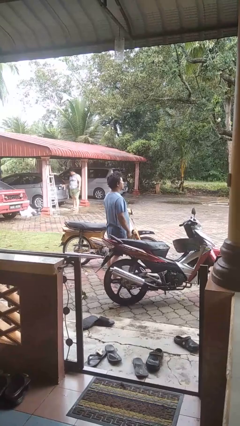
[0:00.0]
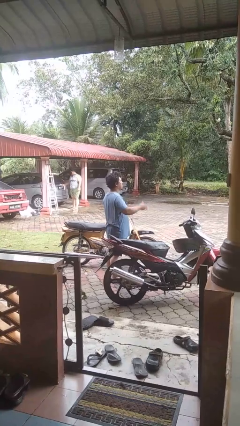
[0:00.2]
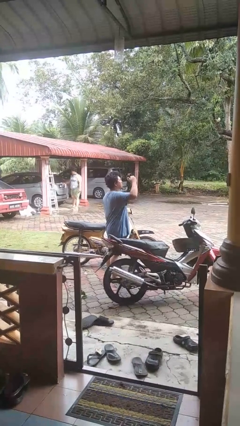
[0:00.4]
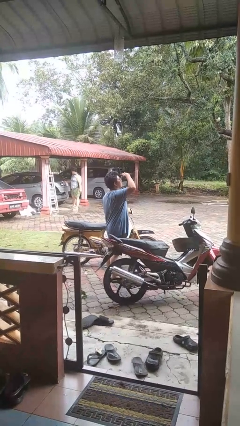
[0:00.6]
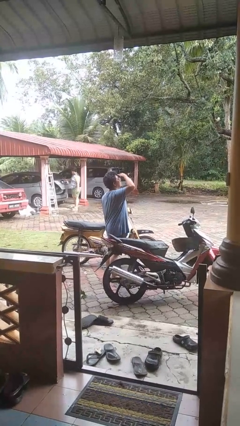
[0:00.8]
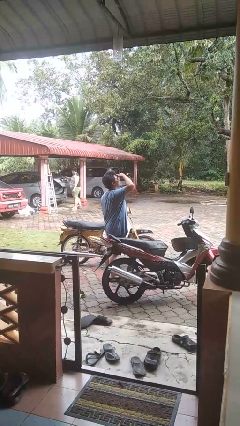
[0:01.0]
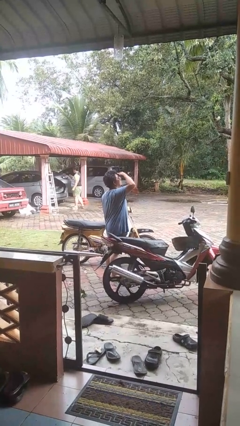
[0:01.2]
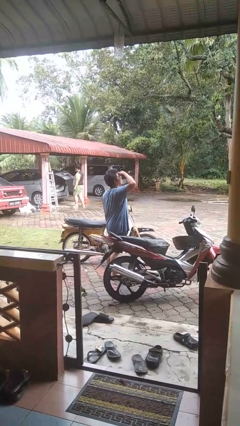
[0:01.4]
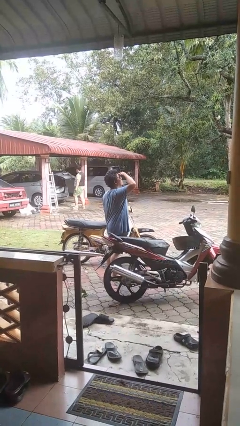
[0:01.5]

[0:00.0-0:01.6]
person shades eyes

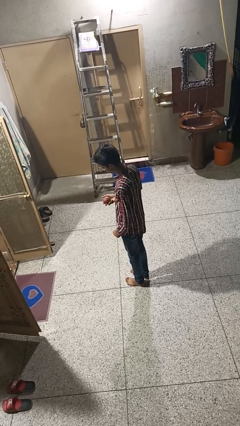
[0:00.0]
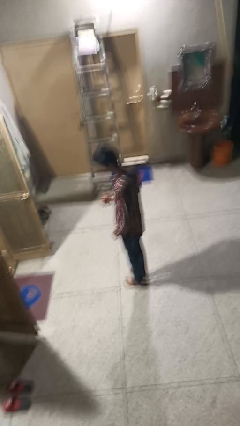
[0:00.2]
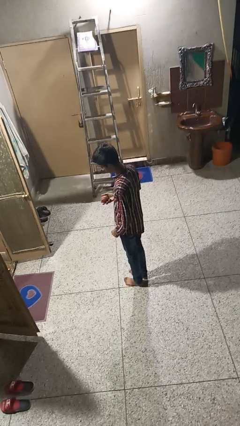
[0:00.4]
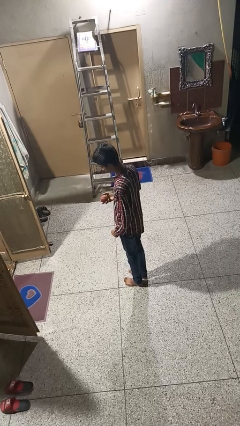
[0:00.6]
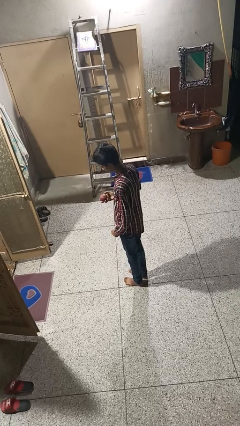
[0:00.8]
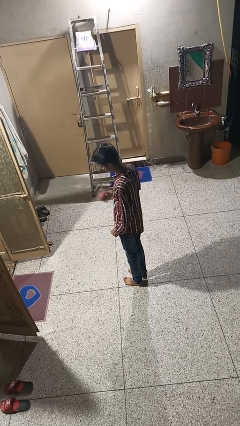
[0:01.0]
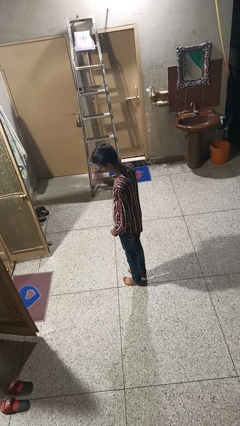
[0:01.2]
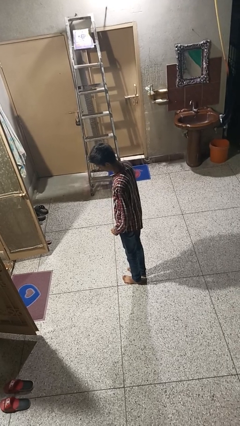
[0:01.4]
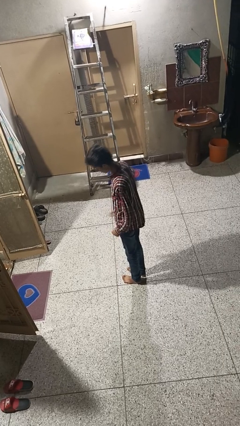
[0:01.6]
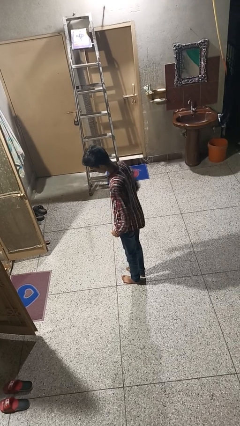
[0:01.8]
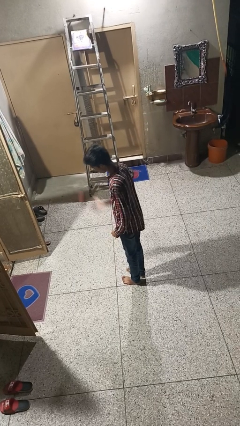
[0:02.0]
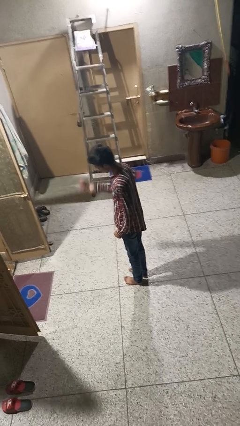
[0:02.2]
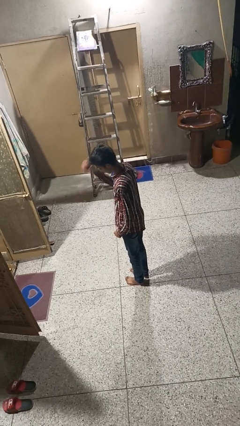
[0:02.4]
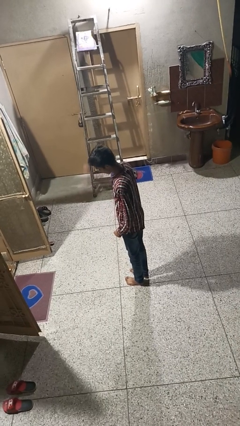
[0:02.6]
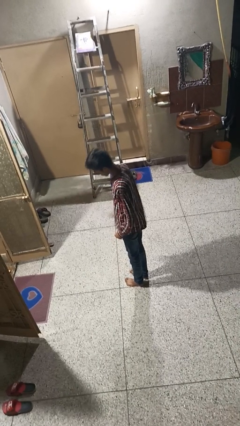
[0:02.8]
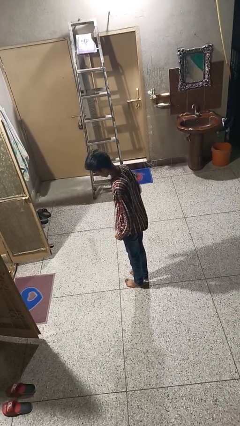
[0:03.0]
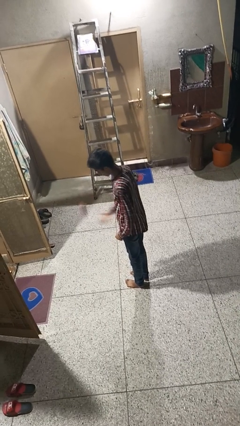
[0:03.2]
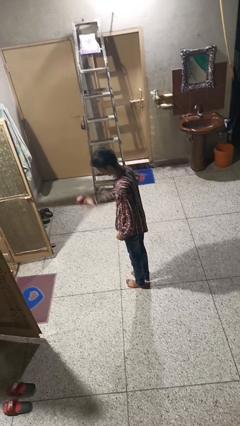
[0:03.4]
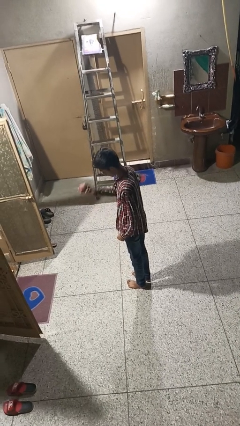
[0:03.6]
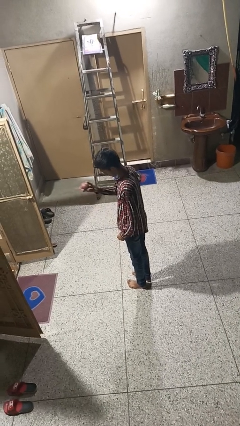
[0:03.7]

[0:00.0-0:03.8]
person bounces ball on floor

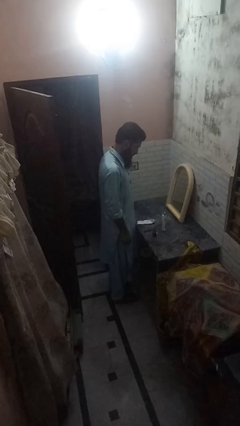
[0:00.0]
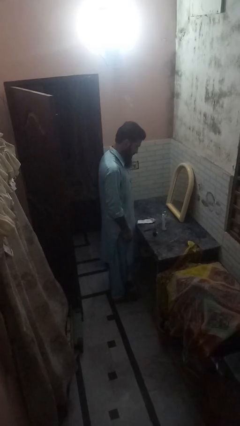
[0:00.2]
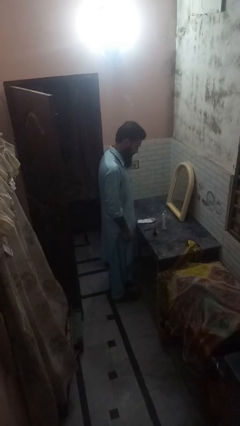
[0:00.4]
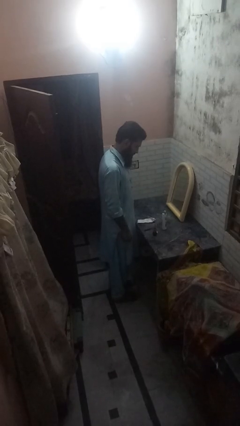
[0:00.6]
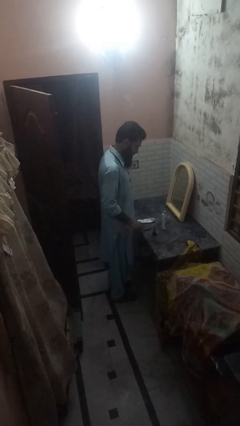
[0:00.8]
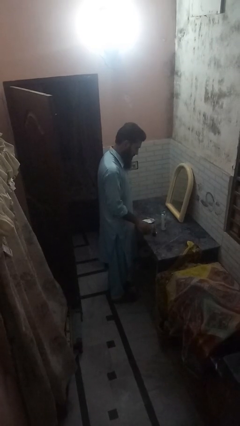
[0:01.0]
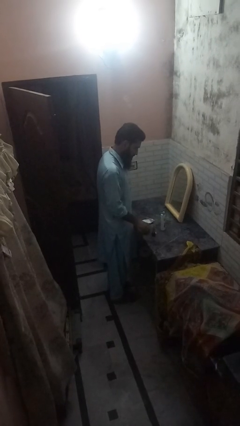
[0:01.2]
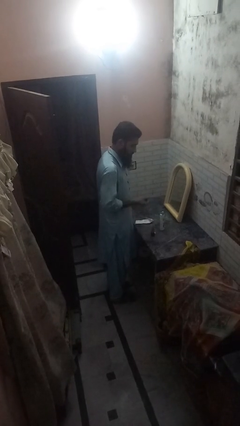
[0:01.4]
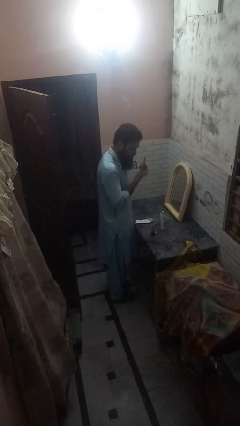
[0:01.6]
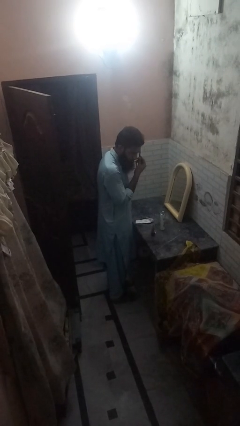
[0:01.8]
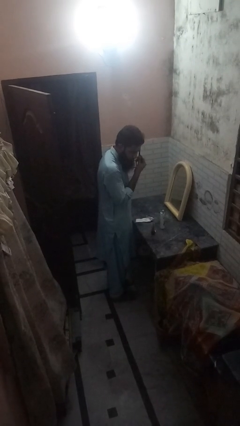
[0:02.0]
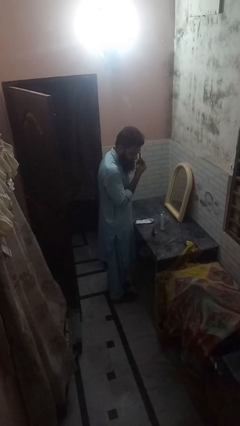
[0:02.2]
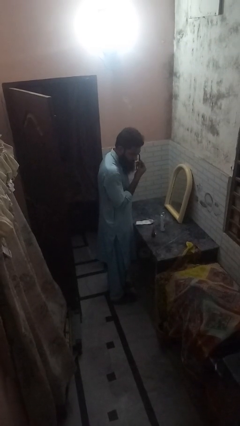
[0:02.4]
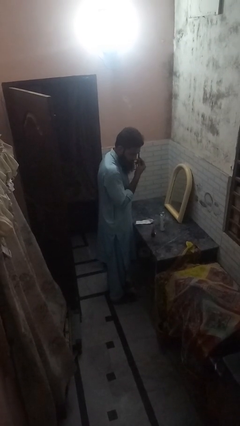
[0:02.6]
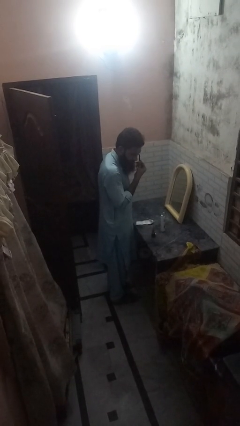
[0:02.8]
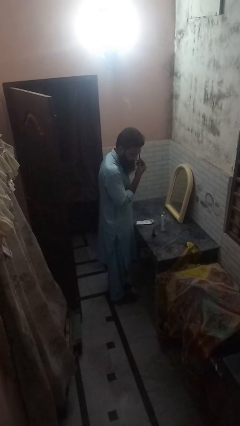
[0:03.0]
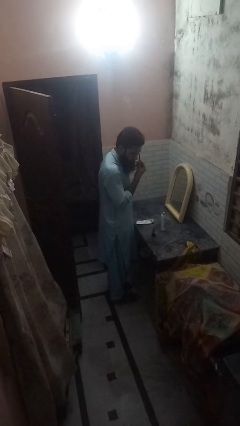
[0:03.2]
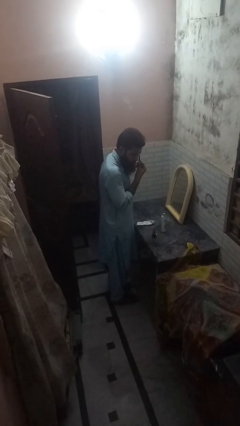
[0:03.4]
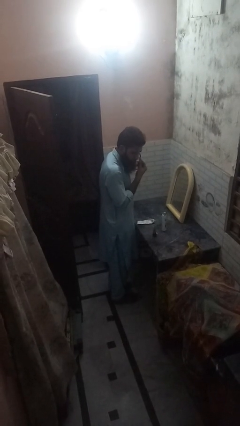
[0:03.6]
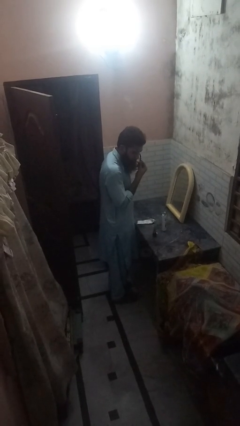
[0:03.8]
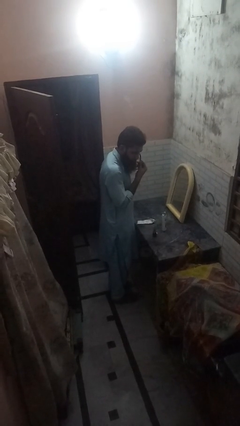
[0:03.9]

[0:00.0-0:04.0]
person shaves face

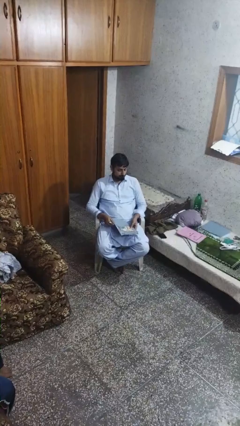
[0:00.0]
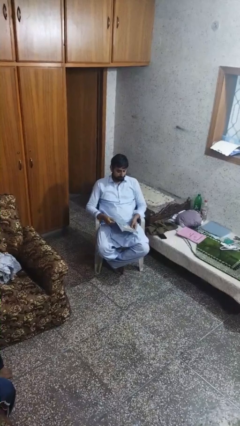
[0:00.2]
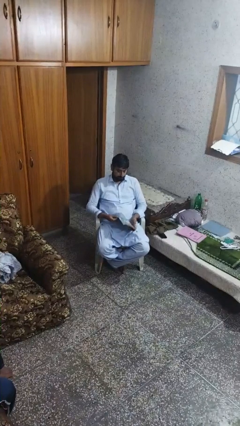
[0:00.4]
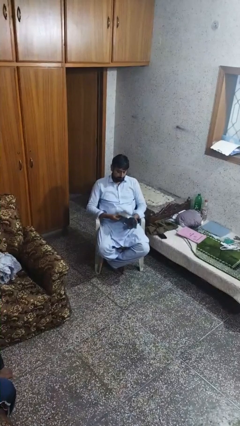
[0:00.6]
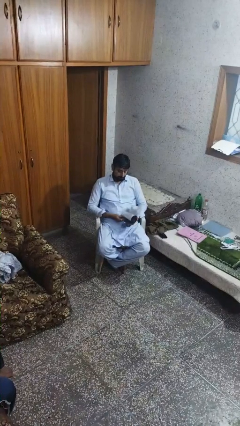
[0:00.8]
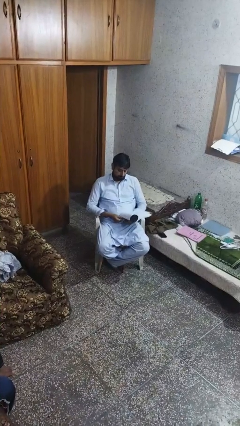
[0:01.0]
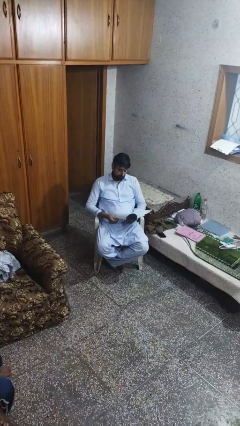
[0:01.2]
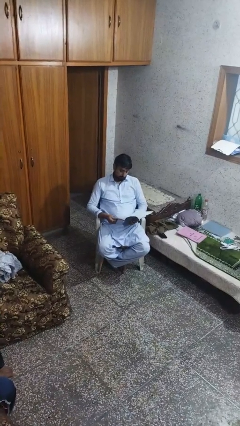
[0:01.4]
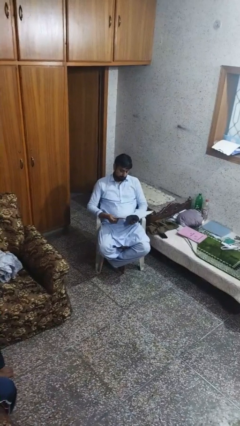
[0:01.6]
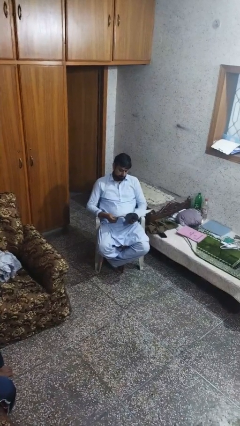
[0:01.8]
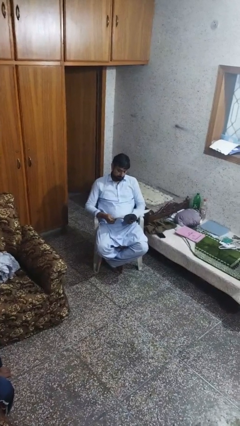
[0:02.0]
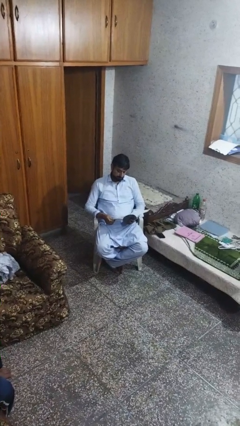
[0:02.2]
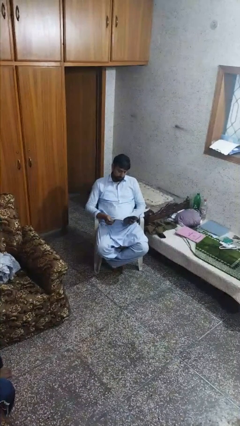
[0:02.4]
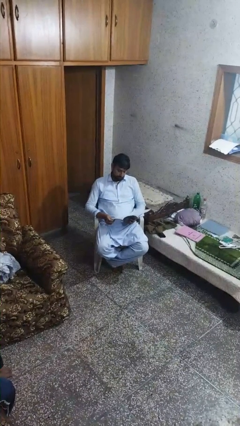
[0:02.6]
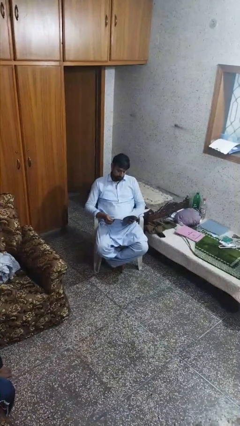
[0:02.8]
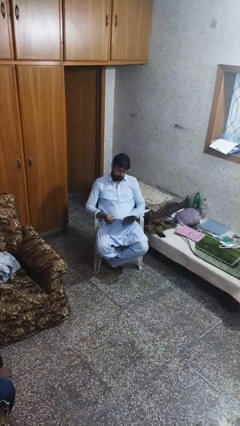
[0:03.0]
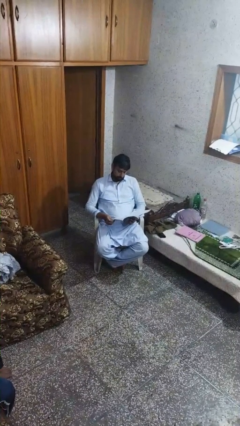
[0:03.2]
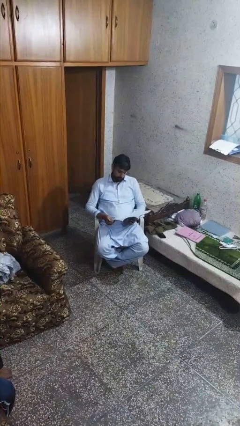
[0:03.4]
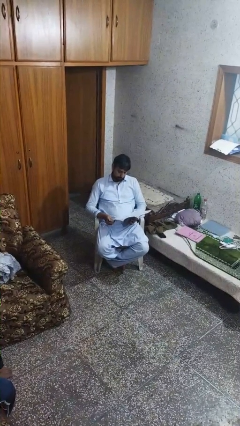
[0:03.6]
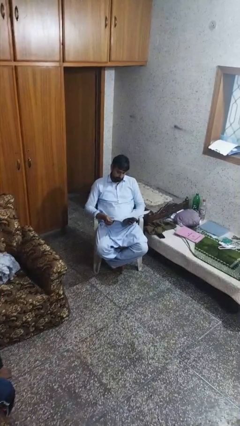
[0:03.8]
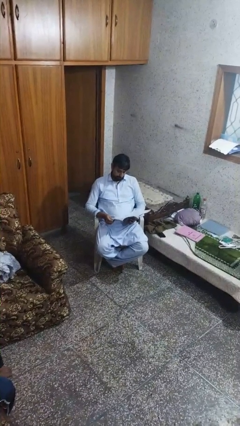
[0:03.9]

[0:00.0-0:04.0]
person reads book

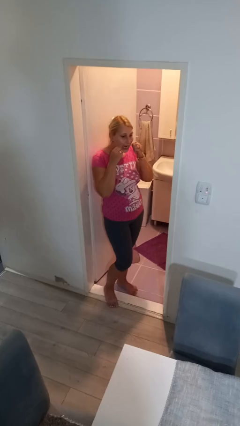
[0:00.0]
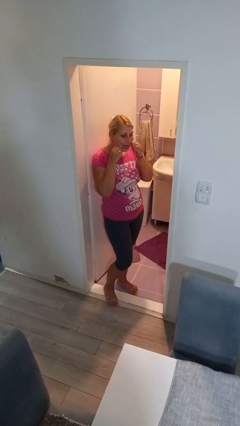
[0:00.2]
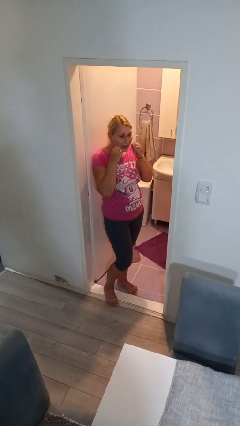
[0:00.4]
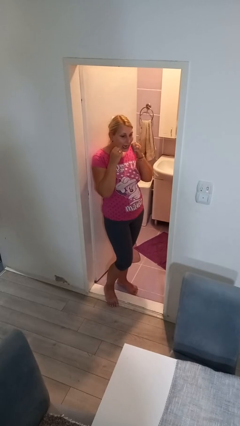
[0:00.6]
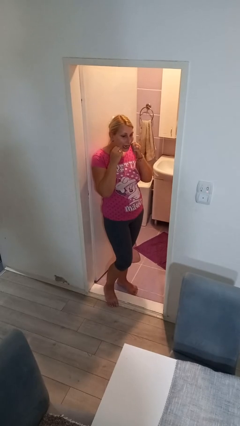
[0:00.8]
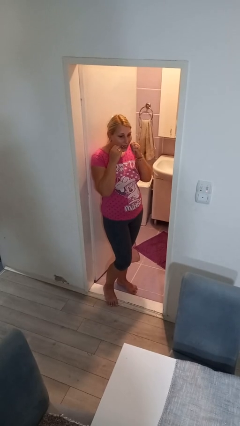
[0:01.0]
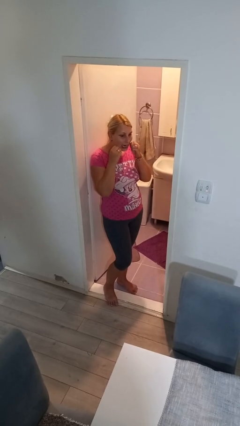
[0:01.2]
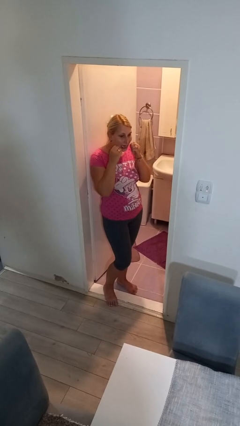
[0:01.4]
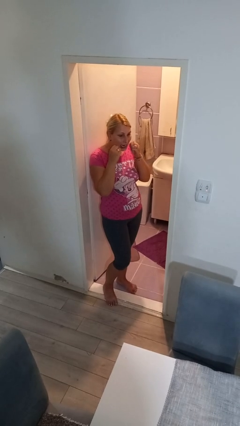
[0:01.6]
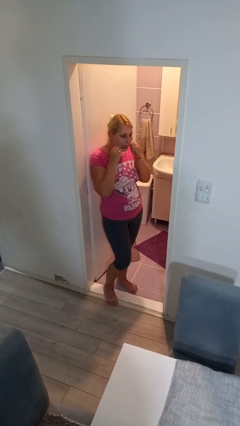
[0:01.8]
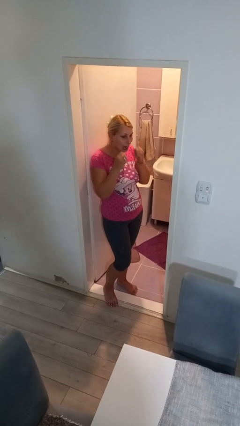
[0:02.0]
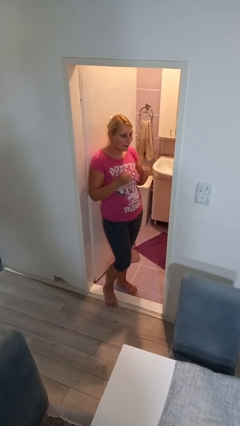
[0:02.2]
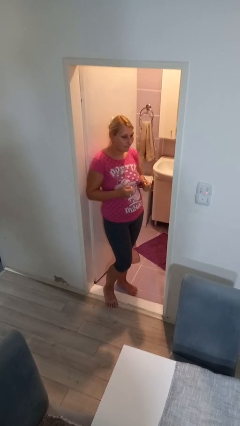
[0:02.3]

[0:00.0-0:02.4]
person flosses

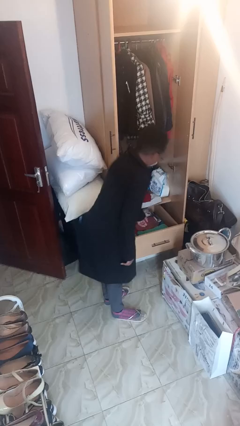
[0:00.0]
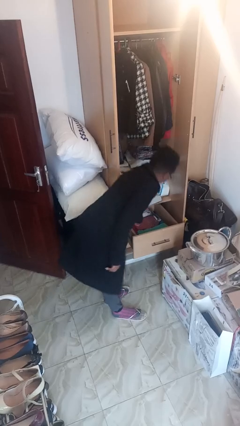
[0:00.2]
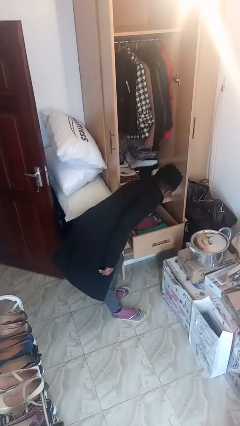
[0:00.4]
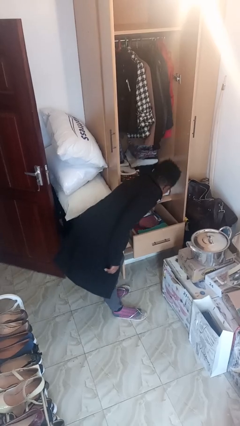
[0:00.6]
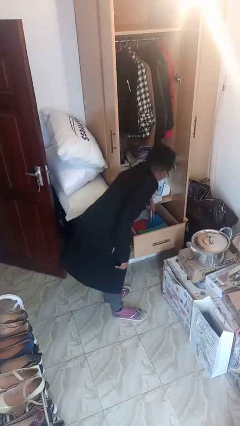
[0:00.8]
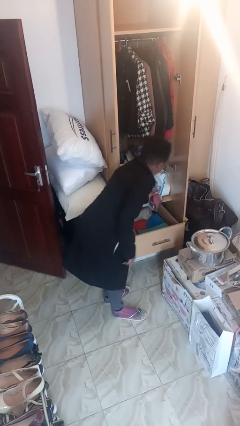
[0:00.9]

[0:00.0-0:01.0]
person takes clothes from dresser

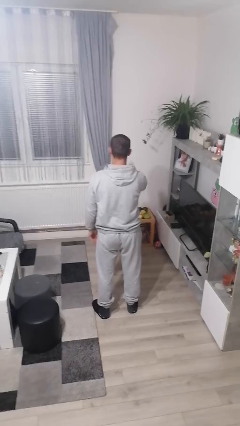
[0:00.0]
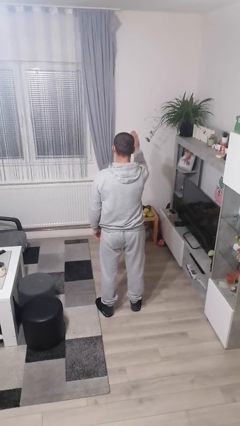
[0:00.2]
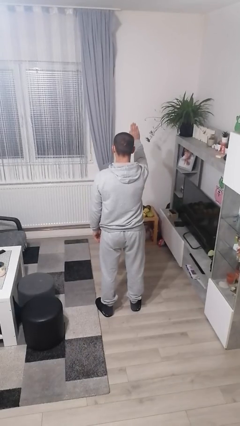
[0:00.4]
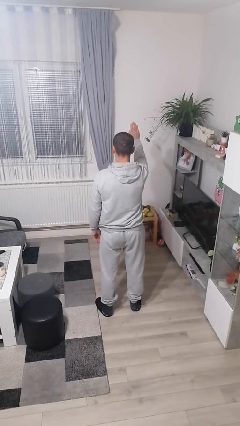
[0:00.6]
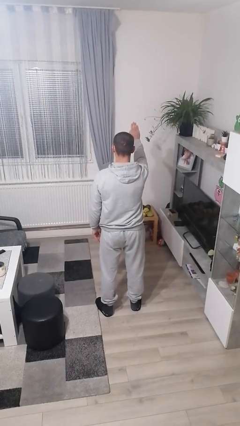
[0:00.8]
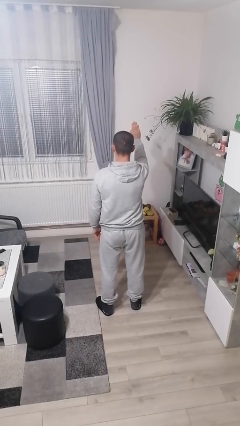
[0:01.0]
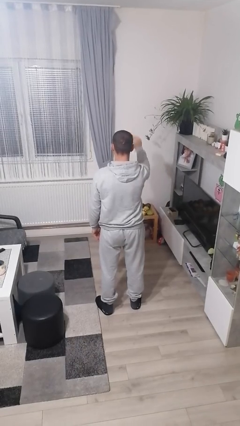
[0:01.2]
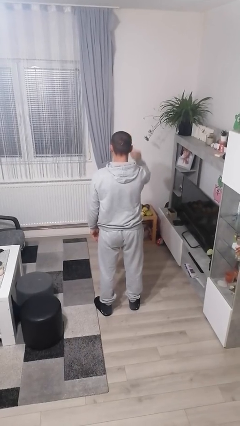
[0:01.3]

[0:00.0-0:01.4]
person gestures stop
